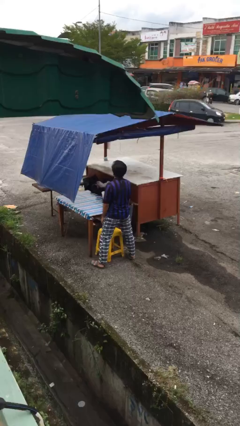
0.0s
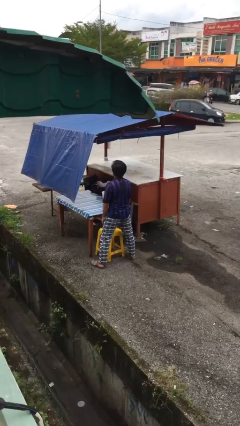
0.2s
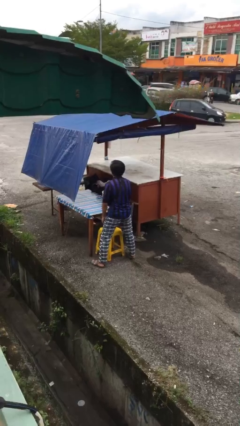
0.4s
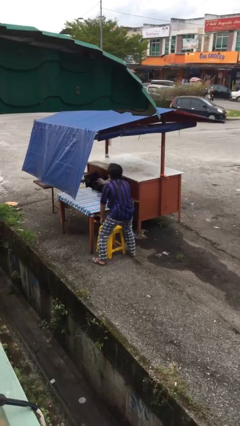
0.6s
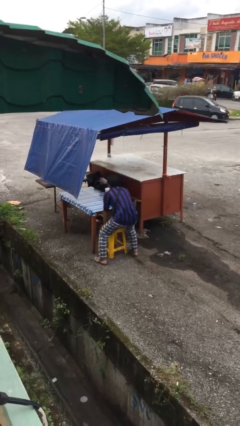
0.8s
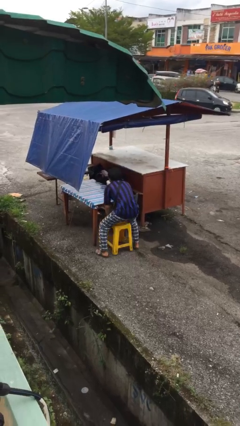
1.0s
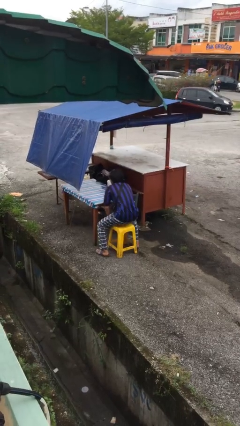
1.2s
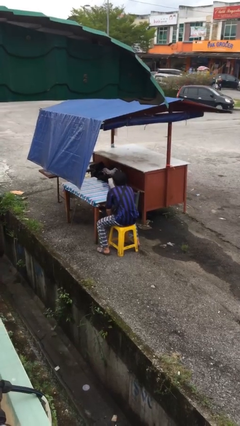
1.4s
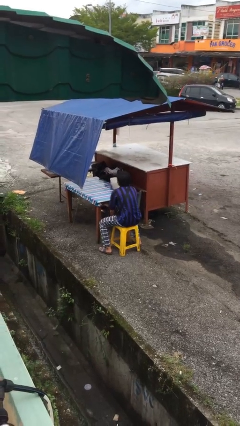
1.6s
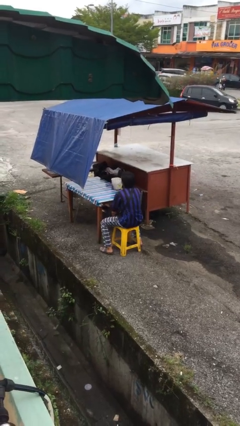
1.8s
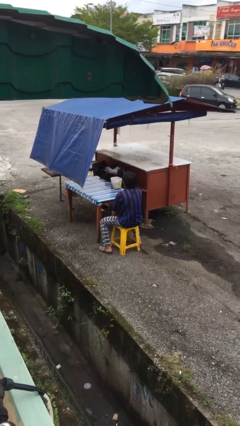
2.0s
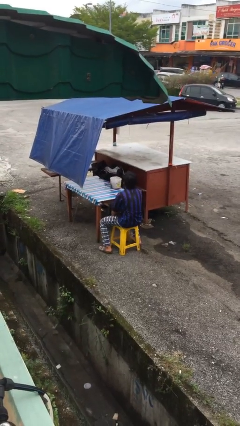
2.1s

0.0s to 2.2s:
person sits down

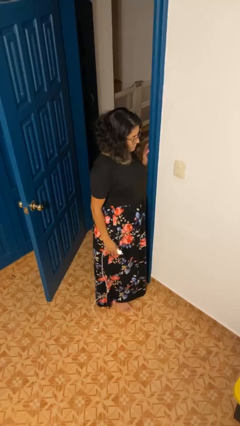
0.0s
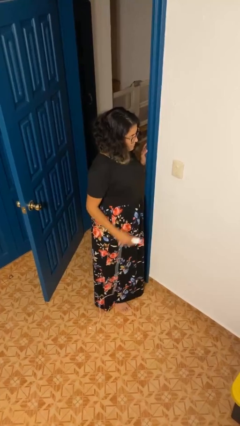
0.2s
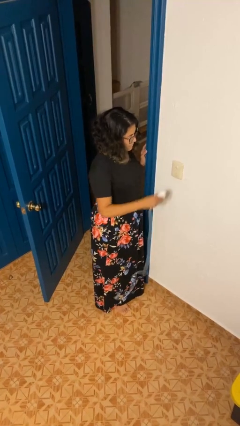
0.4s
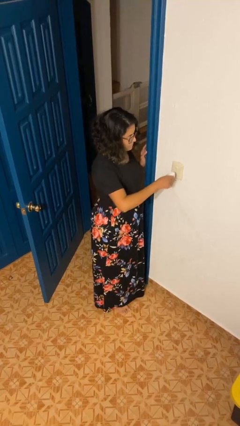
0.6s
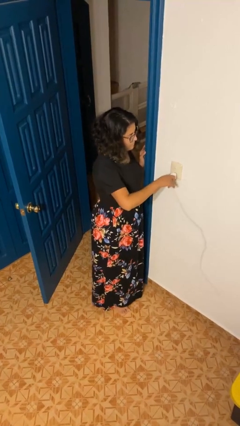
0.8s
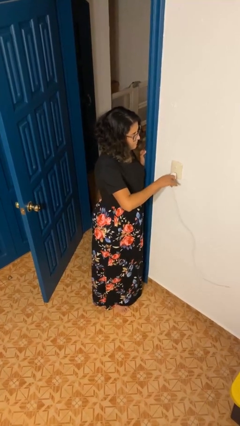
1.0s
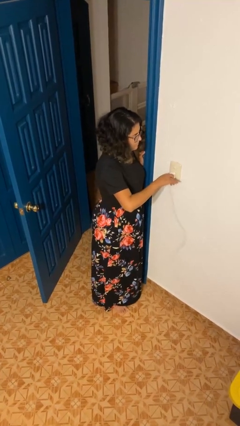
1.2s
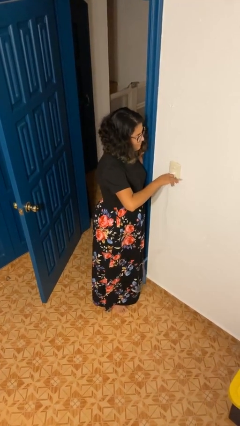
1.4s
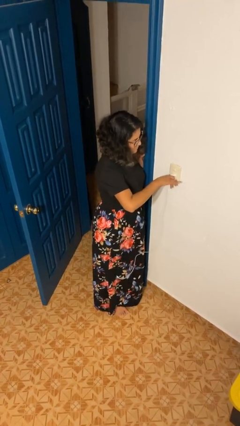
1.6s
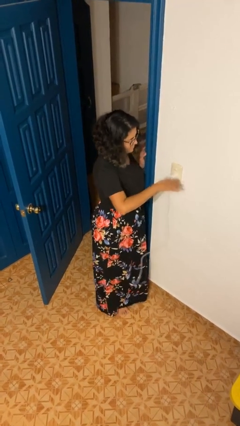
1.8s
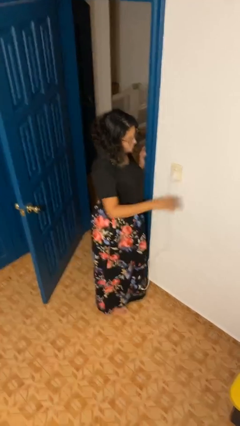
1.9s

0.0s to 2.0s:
person plugs into electrical socket

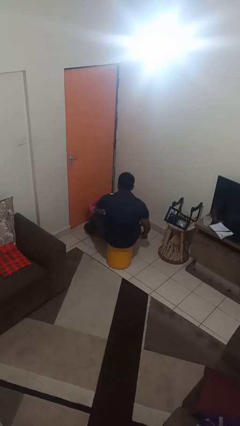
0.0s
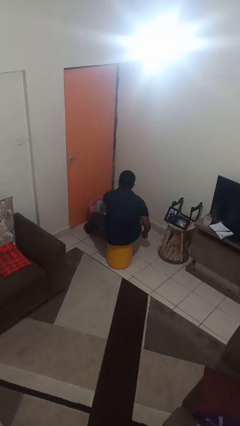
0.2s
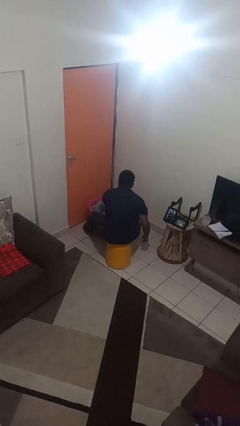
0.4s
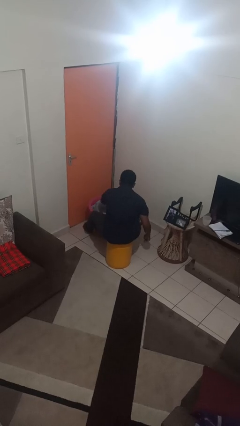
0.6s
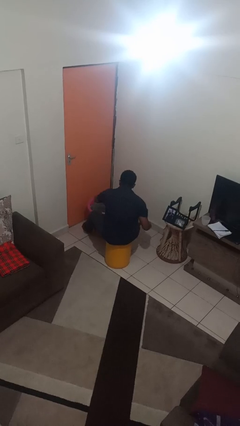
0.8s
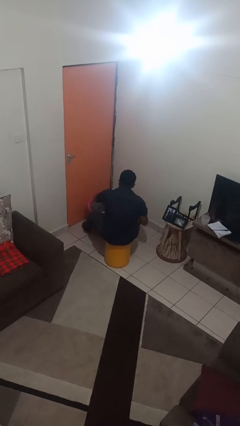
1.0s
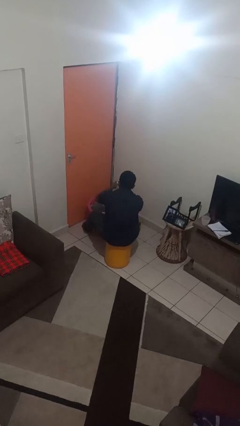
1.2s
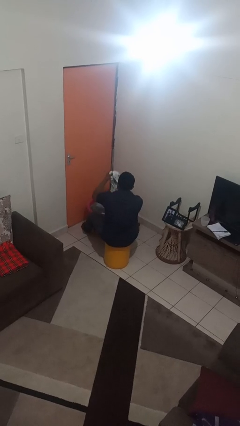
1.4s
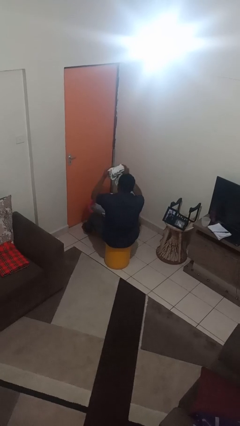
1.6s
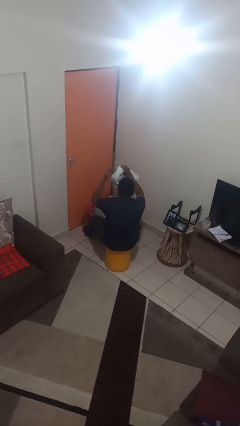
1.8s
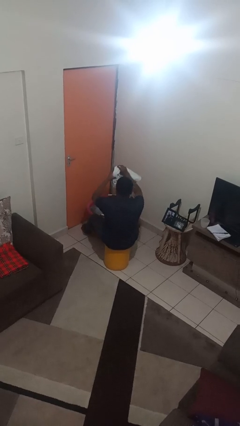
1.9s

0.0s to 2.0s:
person takes object from basket

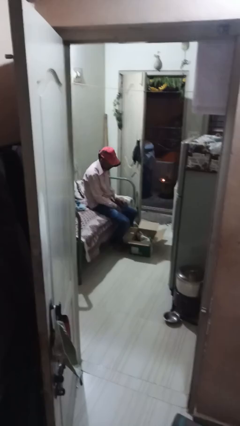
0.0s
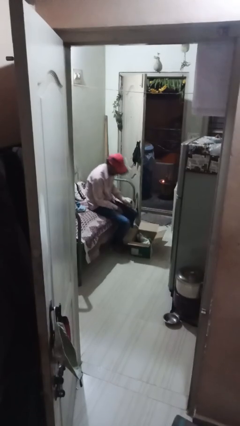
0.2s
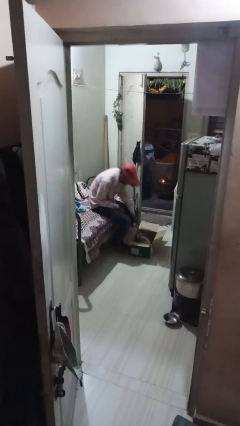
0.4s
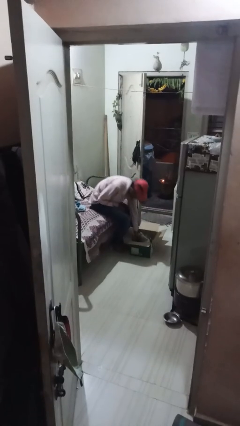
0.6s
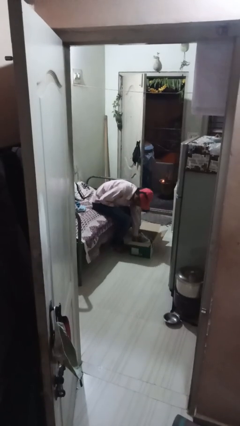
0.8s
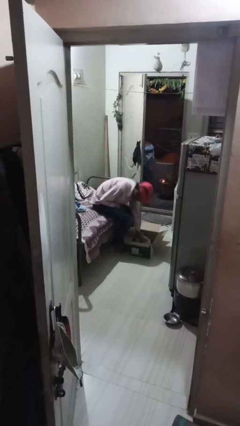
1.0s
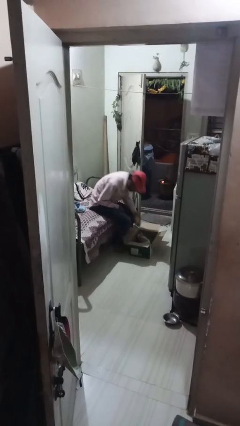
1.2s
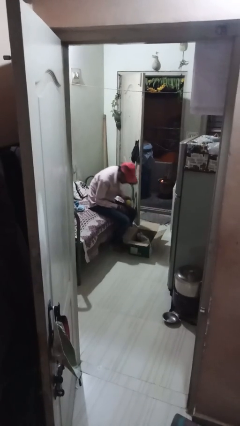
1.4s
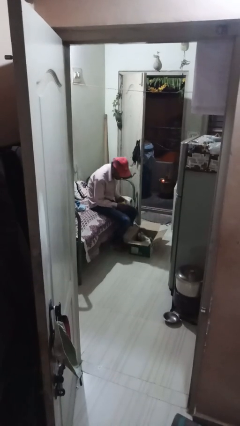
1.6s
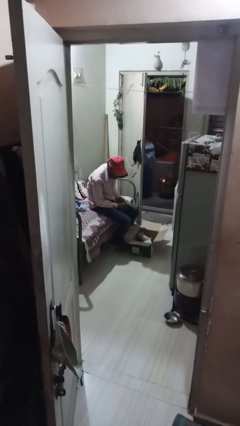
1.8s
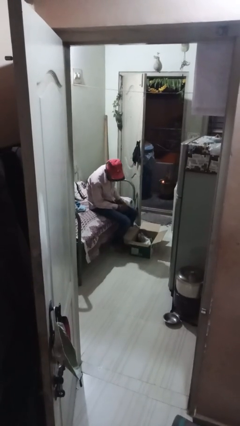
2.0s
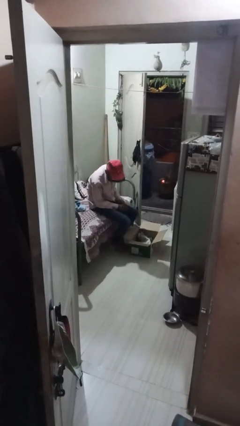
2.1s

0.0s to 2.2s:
person searches in box

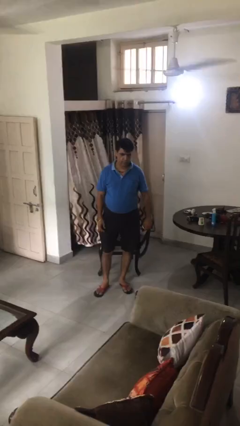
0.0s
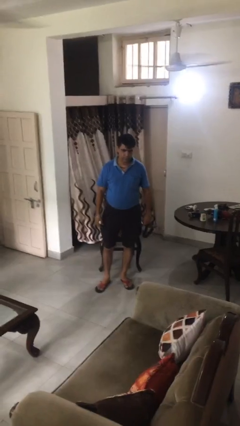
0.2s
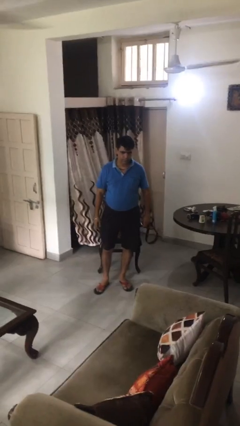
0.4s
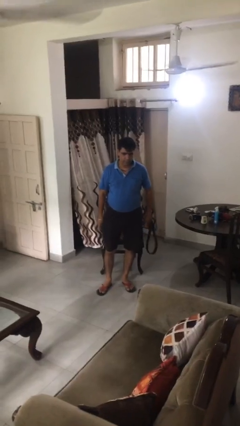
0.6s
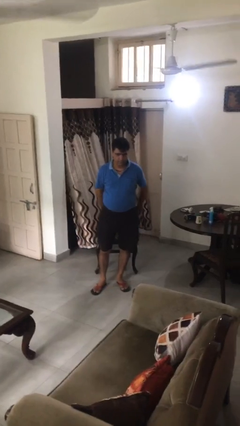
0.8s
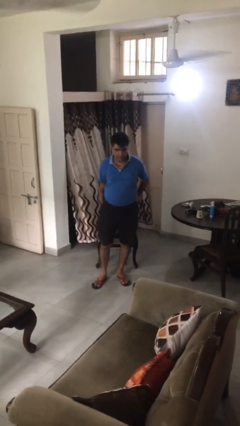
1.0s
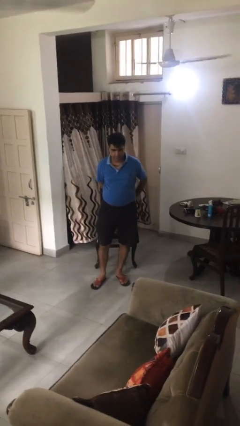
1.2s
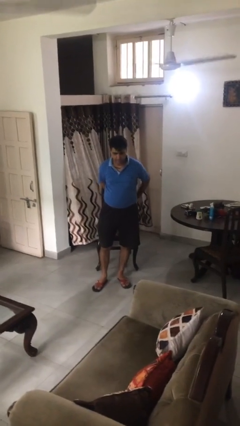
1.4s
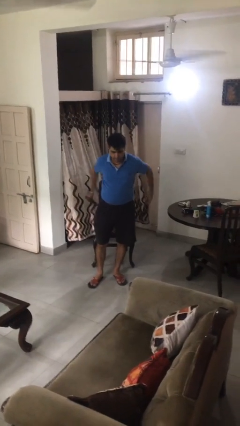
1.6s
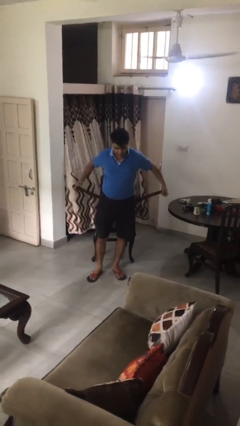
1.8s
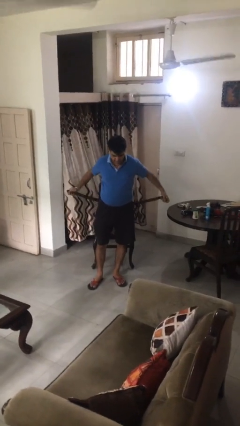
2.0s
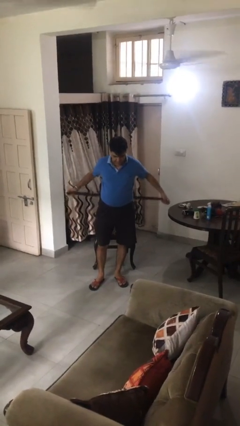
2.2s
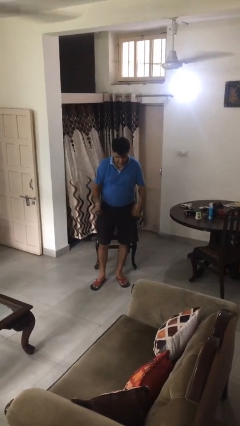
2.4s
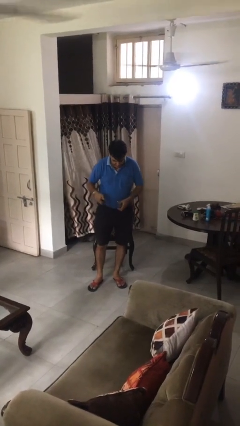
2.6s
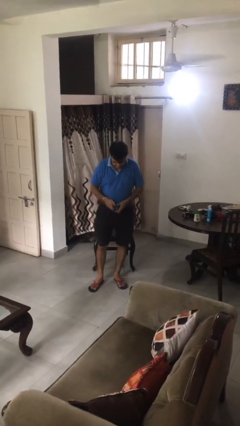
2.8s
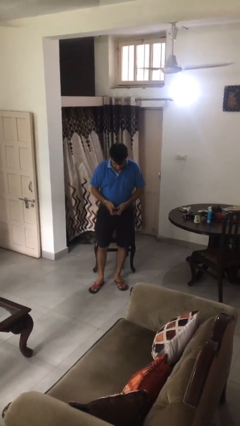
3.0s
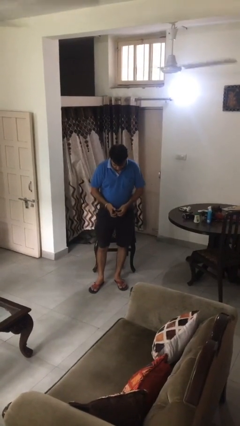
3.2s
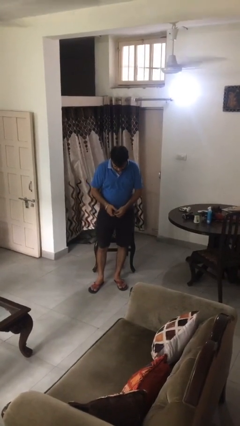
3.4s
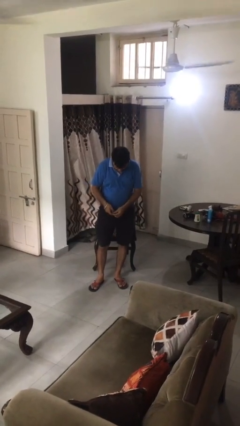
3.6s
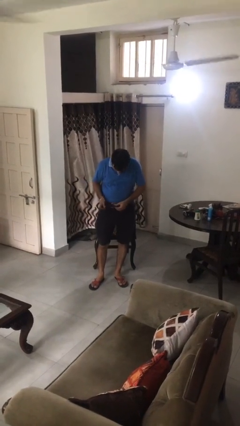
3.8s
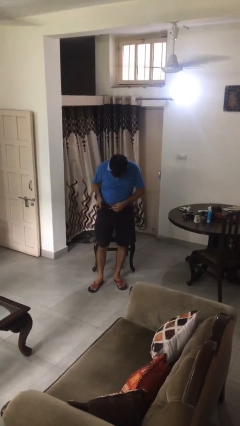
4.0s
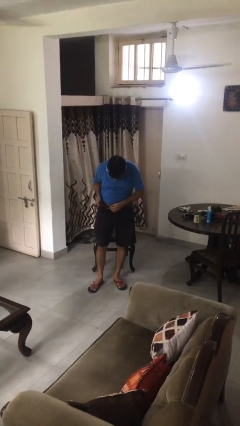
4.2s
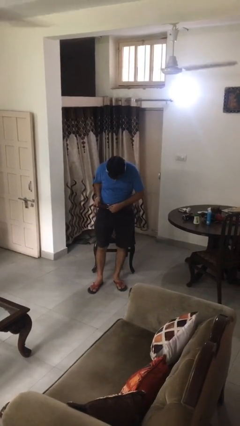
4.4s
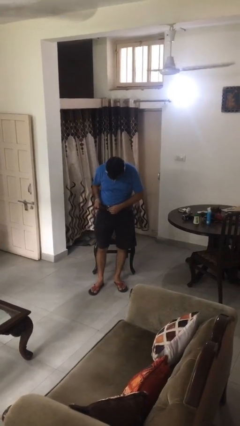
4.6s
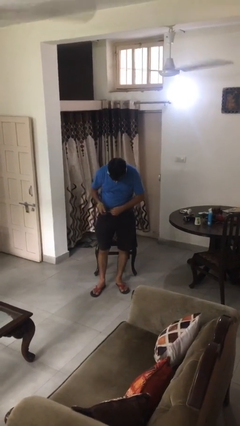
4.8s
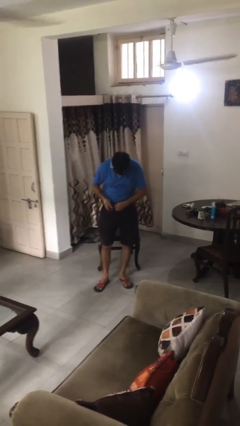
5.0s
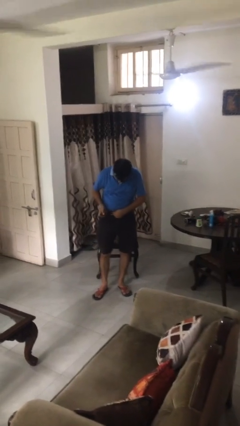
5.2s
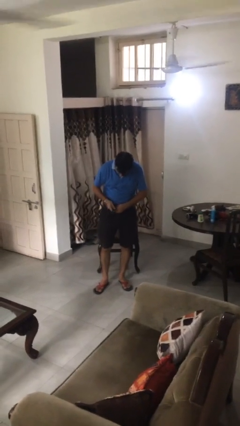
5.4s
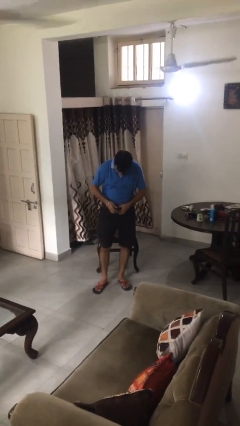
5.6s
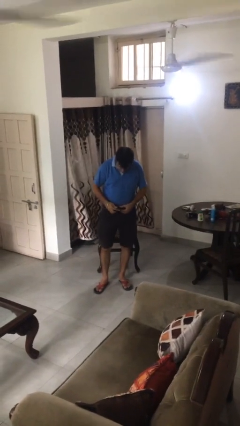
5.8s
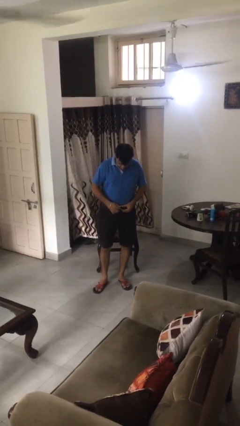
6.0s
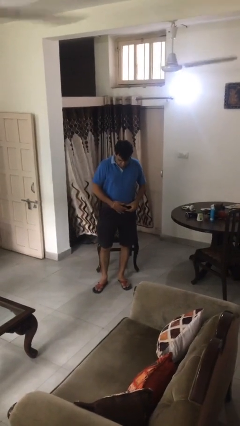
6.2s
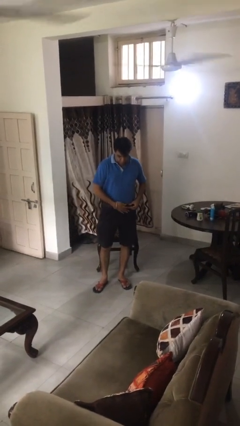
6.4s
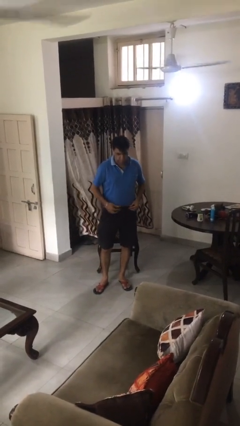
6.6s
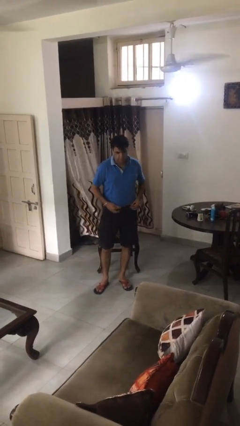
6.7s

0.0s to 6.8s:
person puts on belt

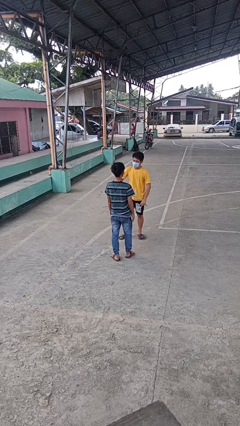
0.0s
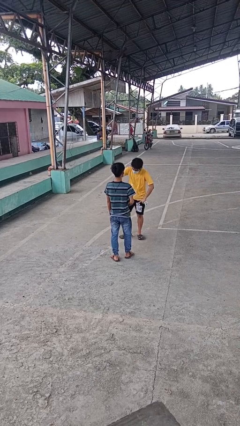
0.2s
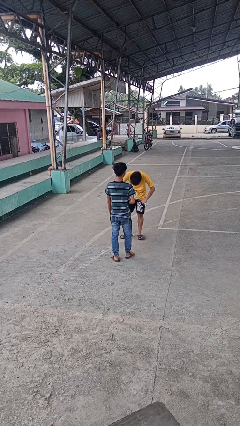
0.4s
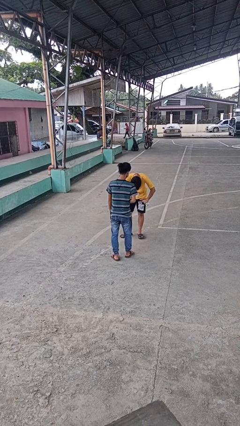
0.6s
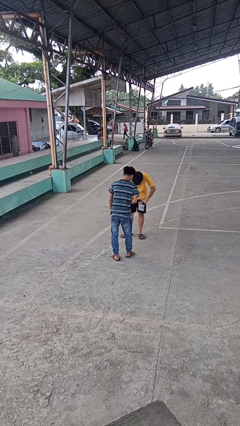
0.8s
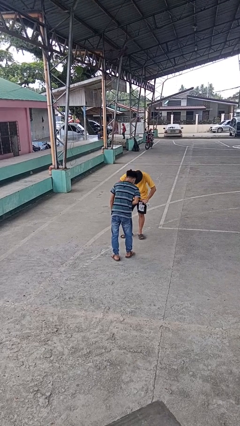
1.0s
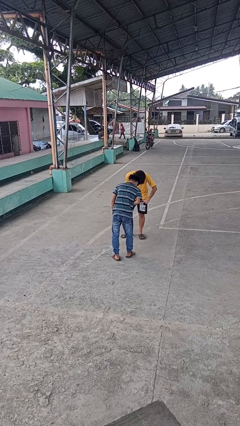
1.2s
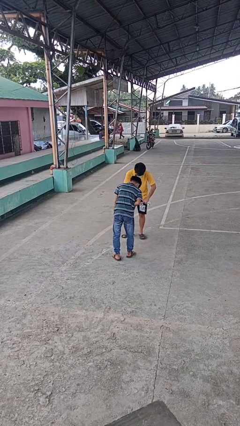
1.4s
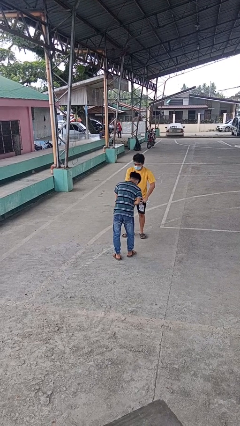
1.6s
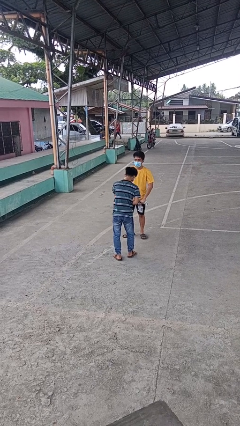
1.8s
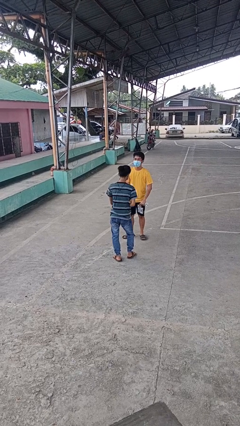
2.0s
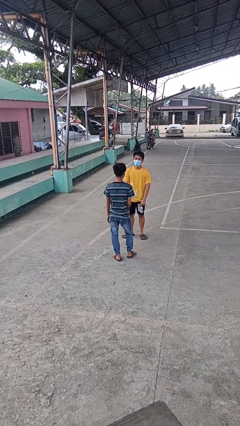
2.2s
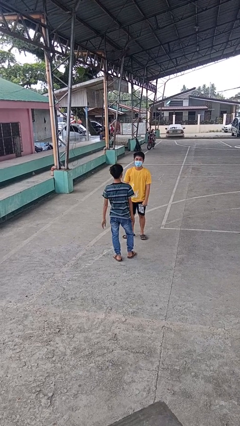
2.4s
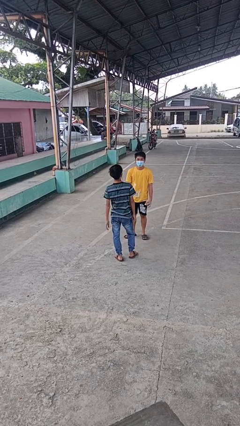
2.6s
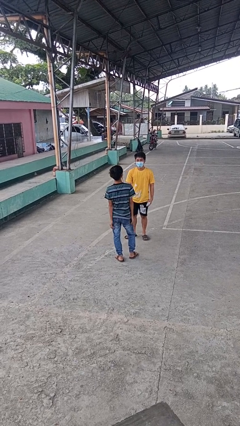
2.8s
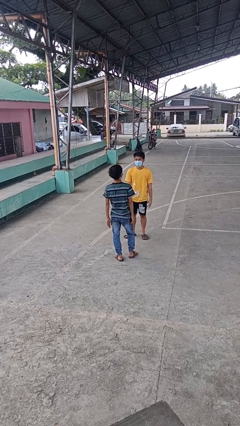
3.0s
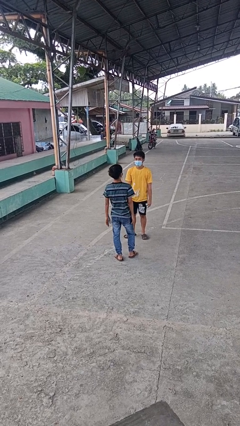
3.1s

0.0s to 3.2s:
person laughs with person
